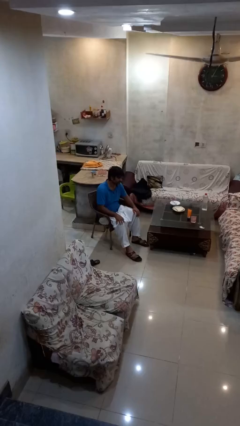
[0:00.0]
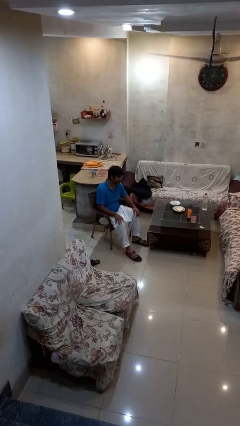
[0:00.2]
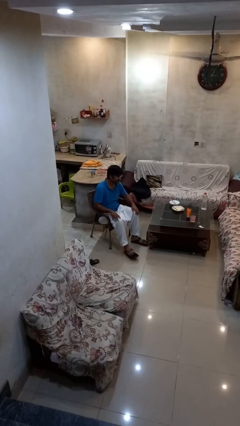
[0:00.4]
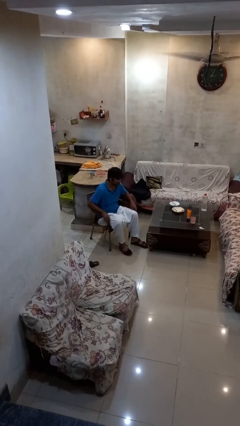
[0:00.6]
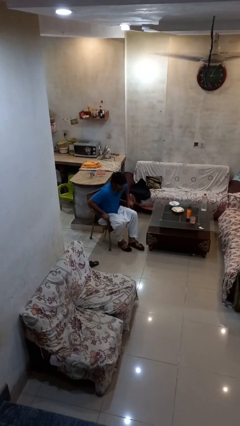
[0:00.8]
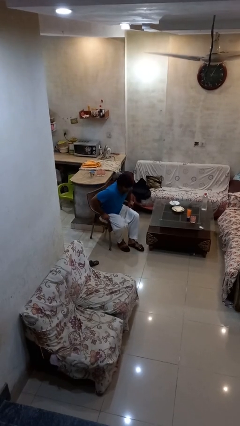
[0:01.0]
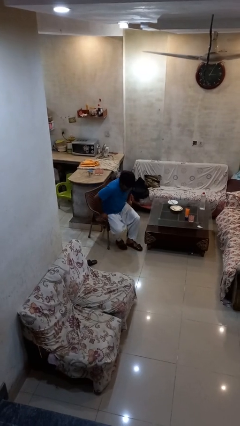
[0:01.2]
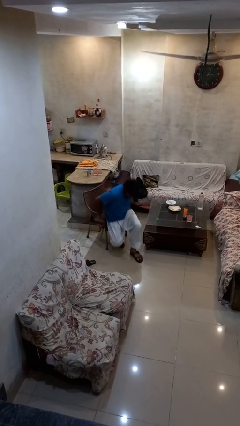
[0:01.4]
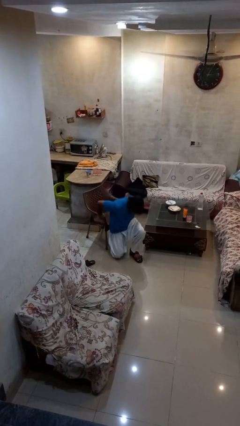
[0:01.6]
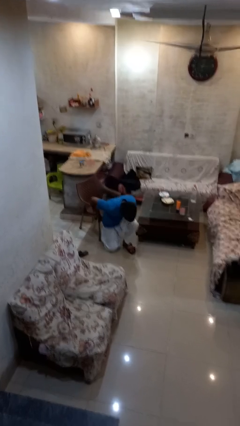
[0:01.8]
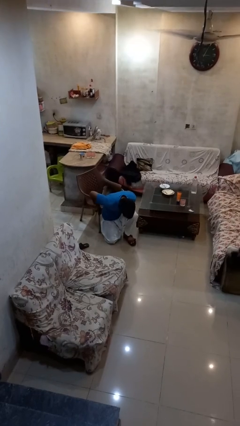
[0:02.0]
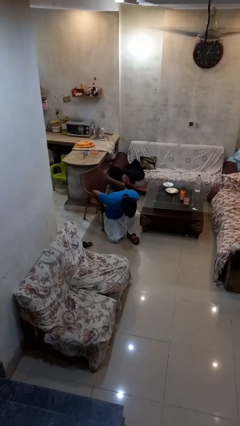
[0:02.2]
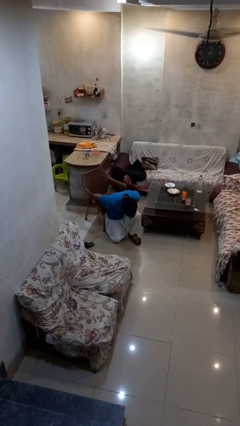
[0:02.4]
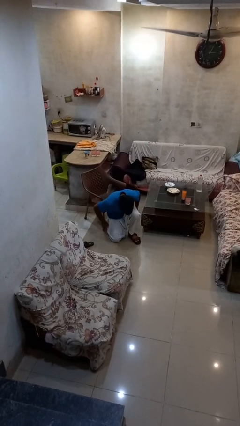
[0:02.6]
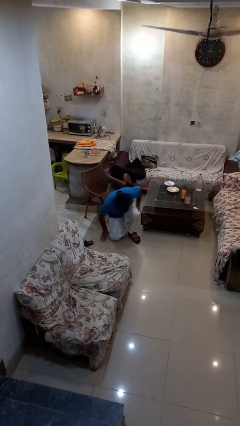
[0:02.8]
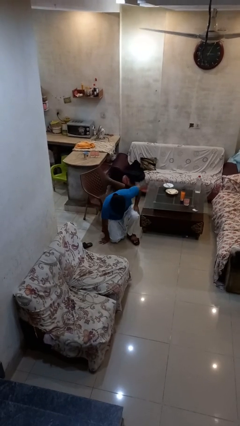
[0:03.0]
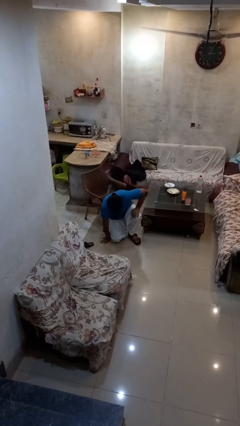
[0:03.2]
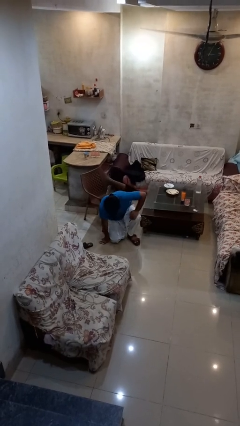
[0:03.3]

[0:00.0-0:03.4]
person falls from chair

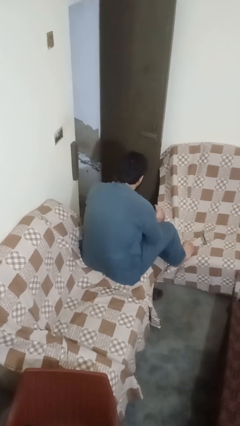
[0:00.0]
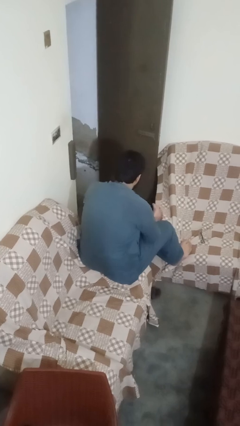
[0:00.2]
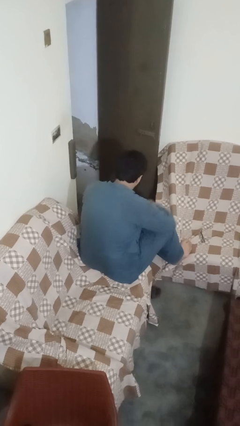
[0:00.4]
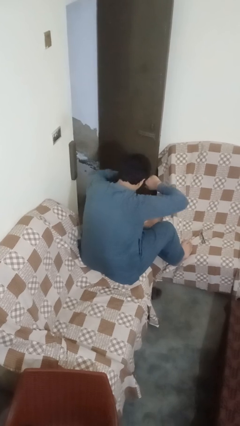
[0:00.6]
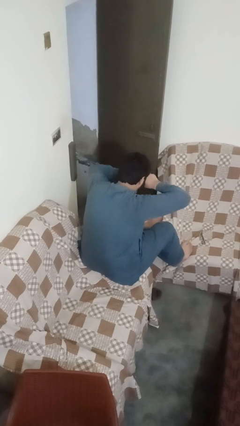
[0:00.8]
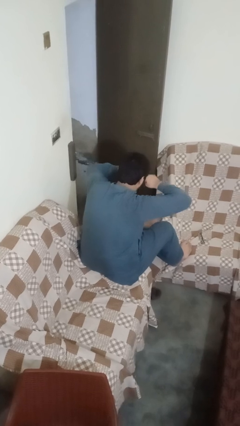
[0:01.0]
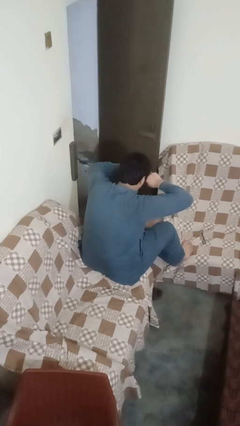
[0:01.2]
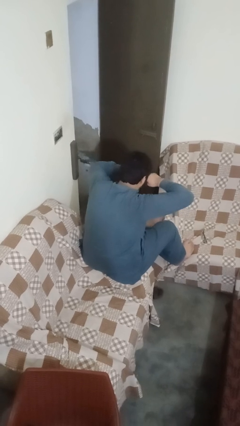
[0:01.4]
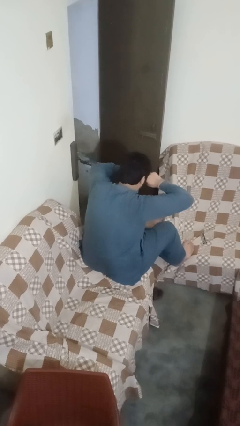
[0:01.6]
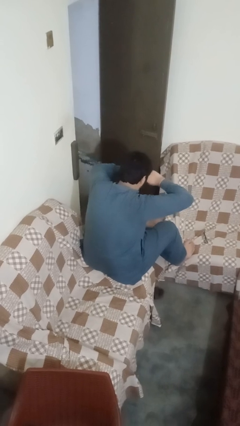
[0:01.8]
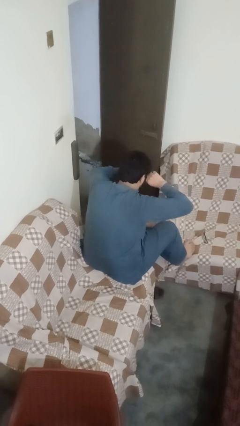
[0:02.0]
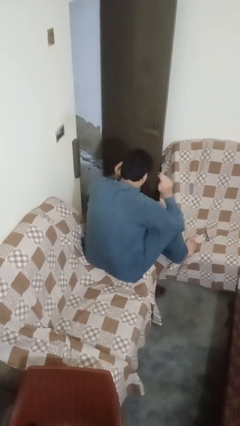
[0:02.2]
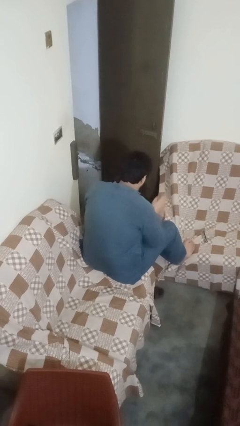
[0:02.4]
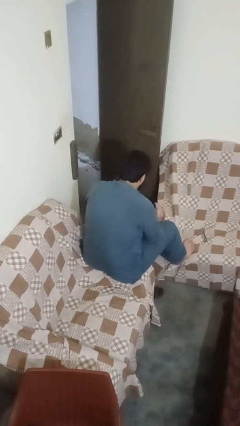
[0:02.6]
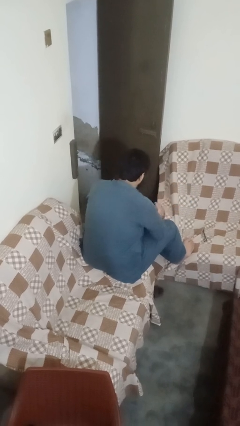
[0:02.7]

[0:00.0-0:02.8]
person rubs eyes

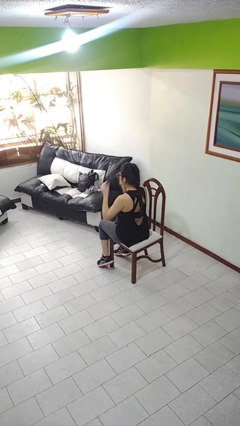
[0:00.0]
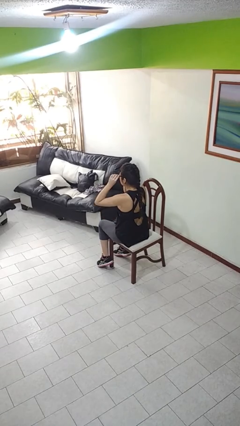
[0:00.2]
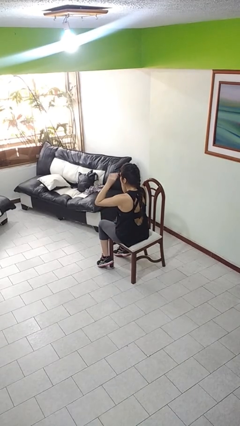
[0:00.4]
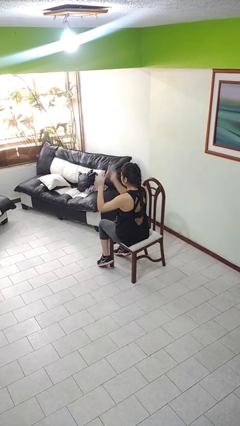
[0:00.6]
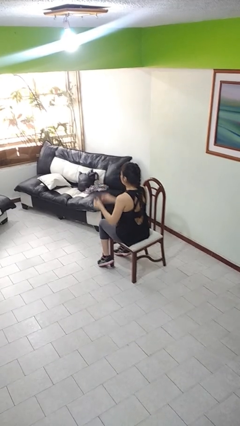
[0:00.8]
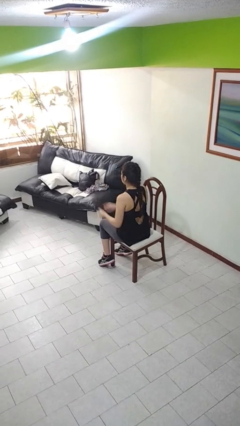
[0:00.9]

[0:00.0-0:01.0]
person takes off glasses

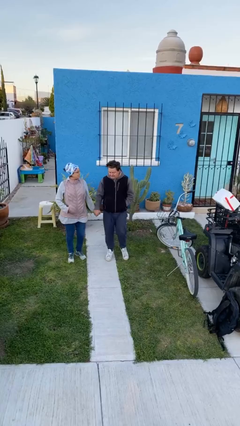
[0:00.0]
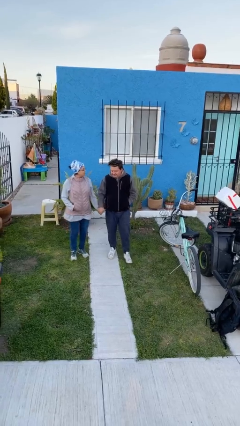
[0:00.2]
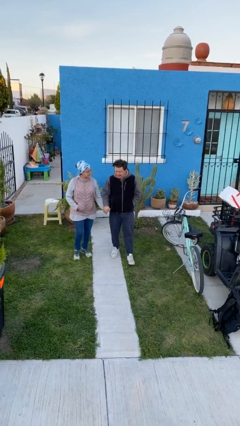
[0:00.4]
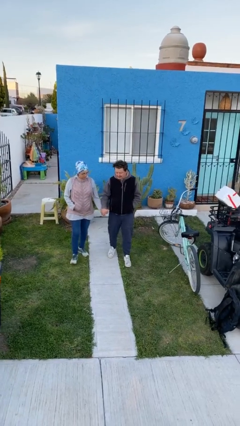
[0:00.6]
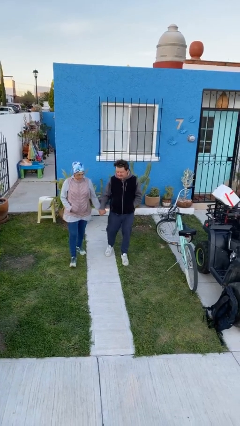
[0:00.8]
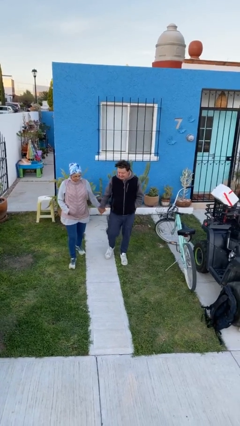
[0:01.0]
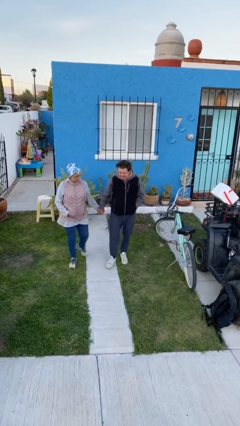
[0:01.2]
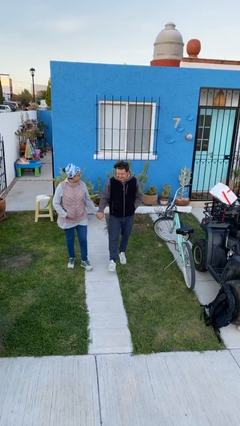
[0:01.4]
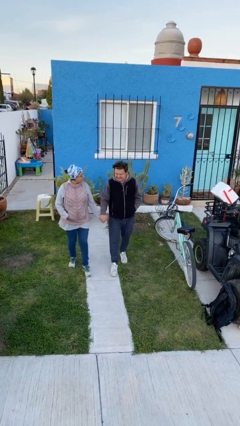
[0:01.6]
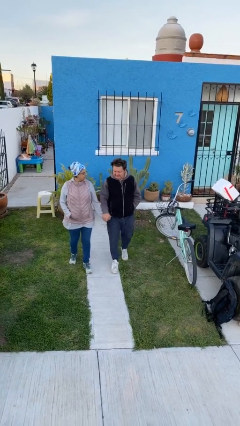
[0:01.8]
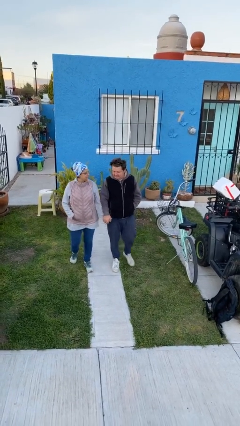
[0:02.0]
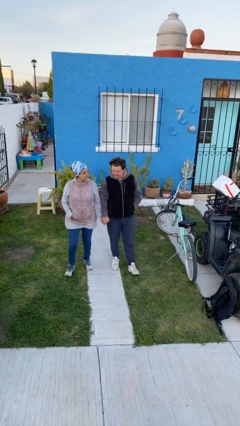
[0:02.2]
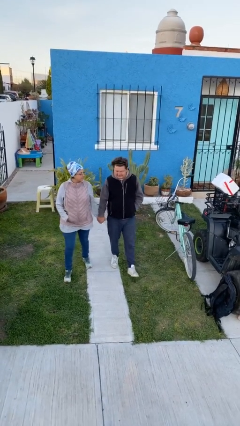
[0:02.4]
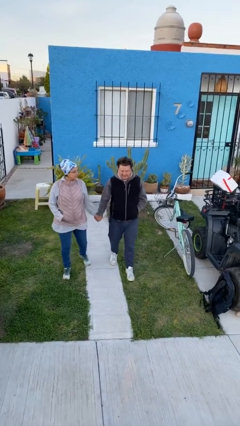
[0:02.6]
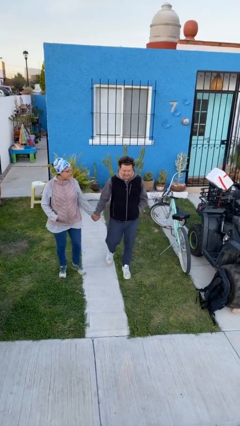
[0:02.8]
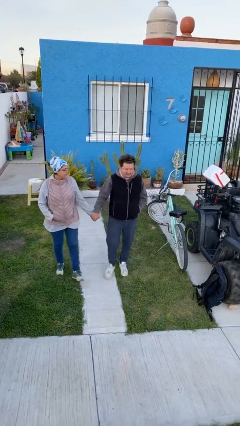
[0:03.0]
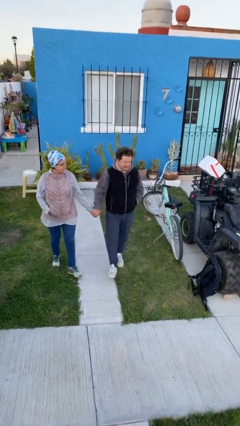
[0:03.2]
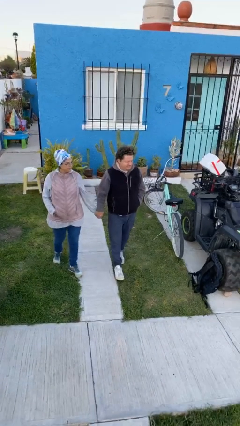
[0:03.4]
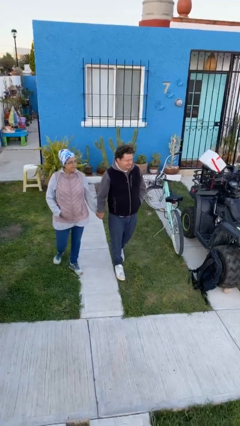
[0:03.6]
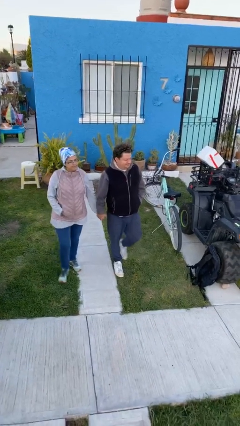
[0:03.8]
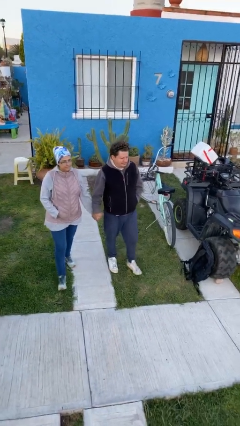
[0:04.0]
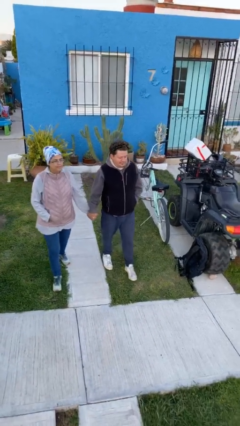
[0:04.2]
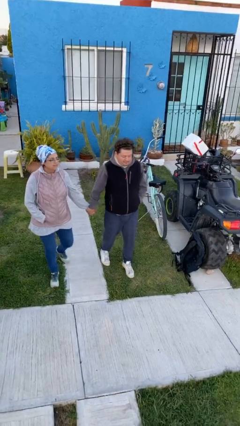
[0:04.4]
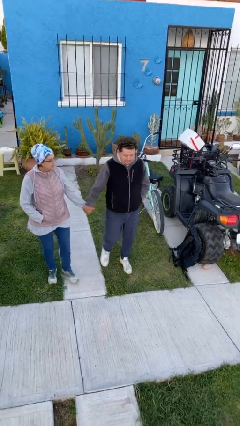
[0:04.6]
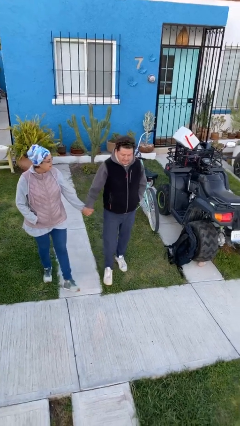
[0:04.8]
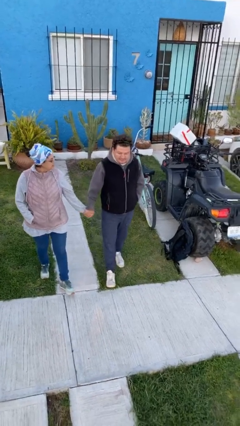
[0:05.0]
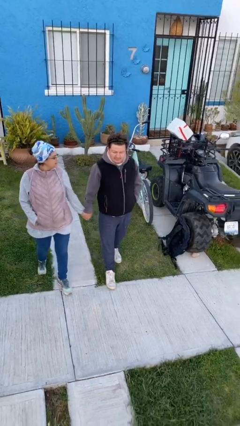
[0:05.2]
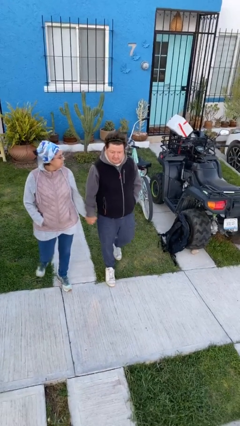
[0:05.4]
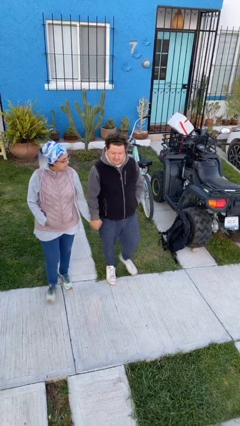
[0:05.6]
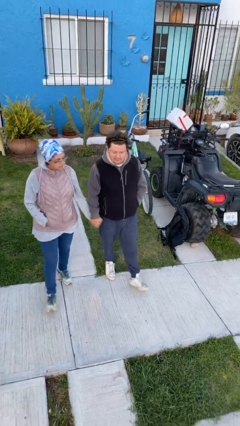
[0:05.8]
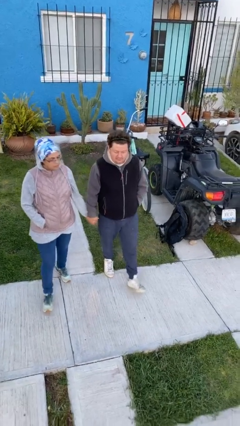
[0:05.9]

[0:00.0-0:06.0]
person holds hand

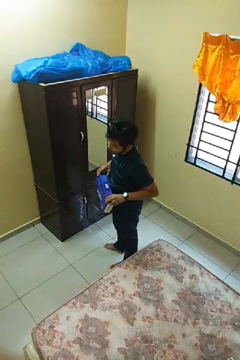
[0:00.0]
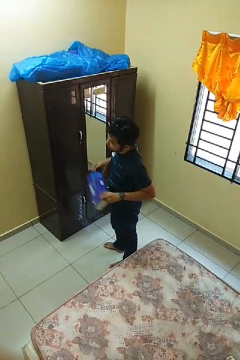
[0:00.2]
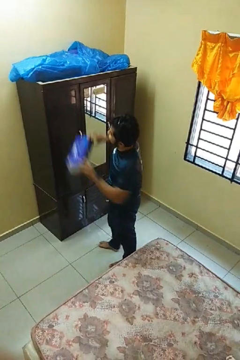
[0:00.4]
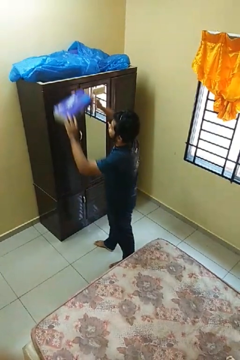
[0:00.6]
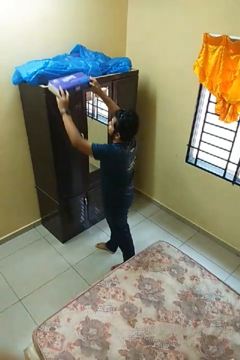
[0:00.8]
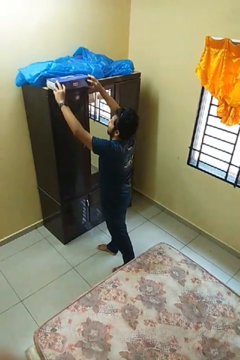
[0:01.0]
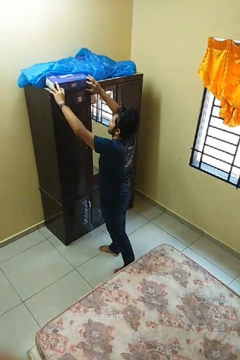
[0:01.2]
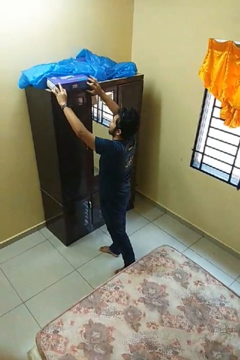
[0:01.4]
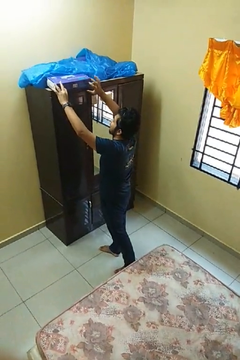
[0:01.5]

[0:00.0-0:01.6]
person puts down object on countertop

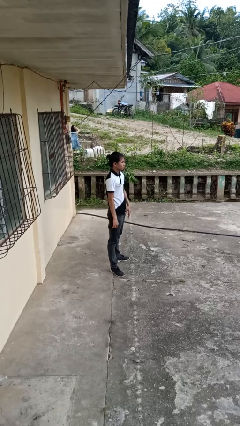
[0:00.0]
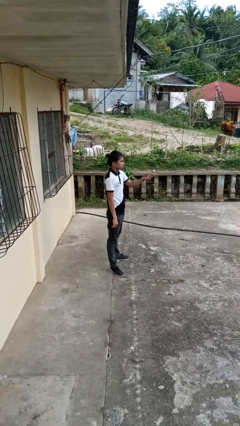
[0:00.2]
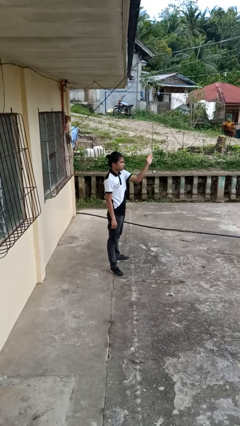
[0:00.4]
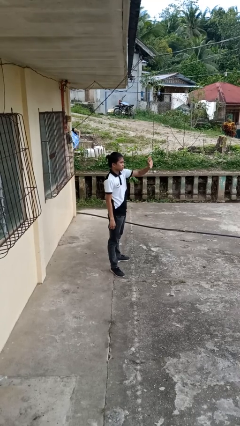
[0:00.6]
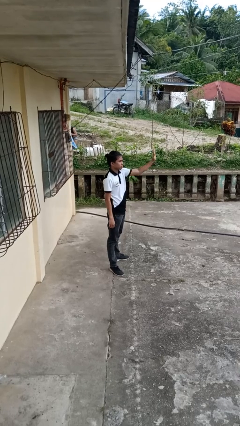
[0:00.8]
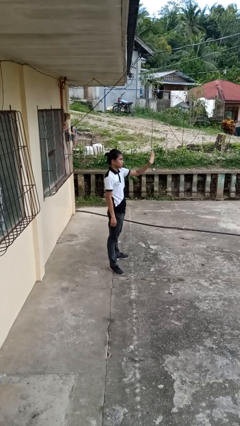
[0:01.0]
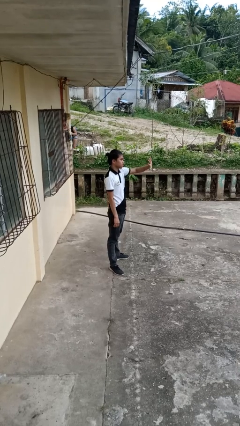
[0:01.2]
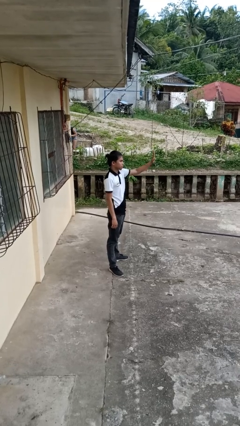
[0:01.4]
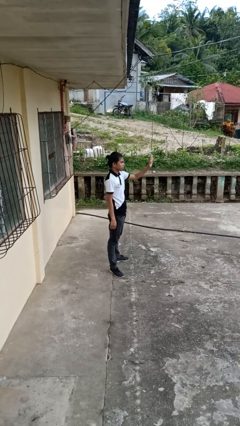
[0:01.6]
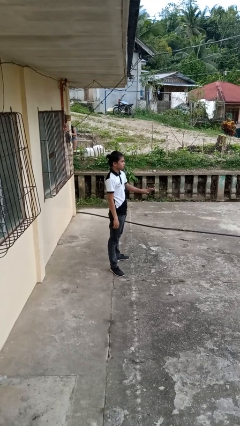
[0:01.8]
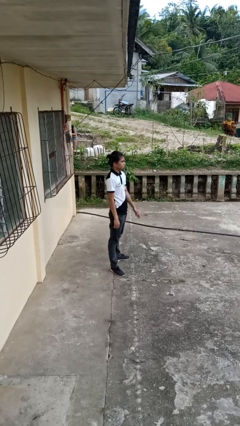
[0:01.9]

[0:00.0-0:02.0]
person waves at person

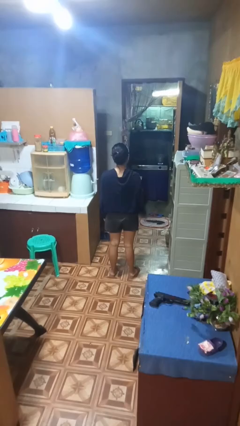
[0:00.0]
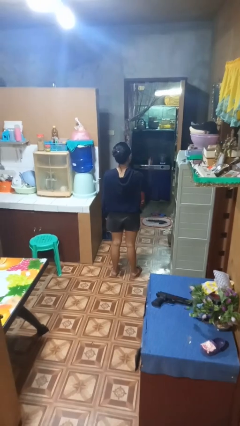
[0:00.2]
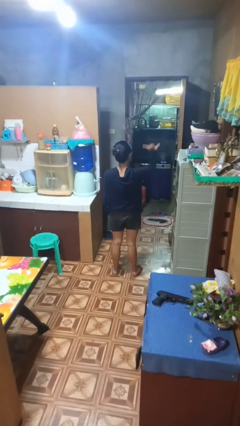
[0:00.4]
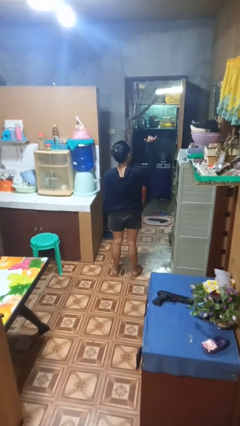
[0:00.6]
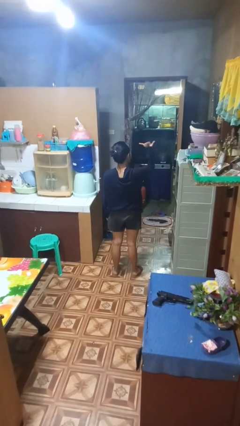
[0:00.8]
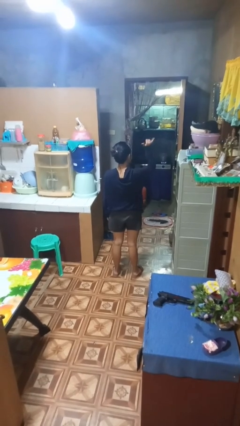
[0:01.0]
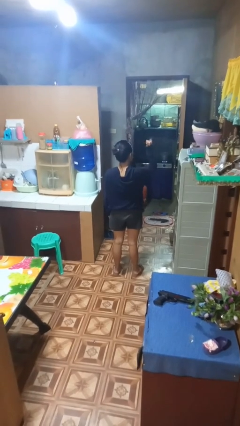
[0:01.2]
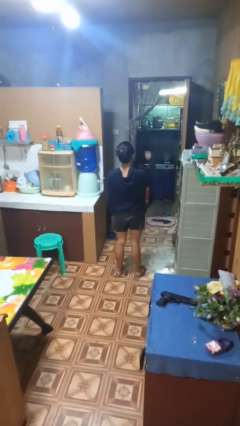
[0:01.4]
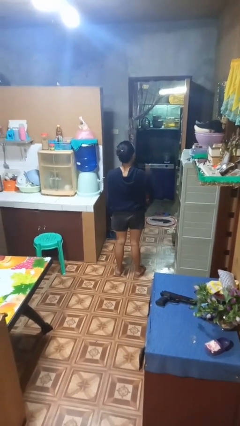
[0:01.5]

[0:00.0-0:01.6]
person gestures hang loose
